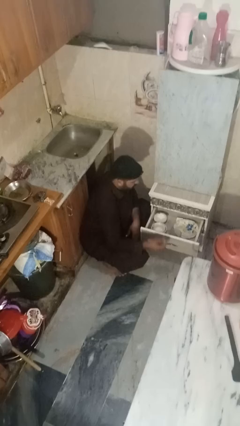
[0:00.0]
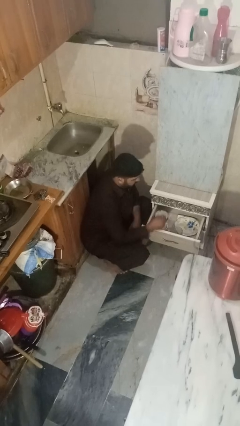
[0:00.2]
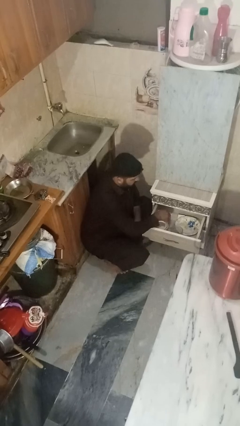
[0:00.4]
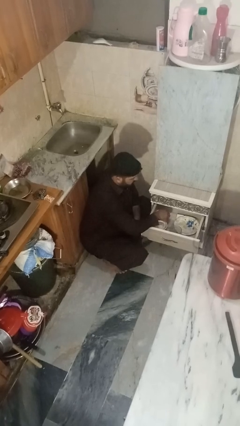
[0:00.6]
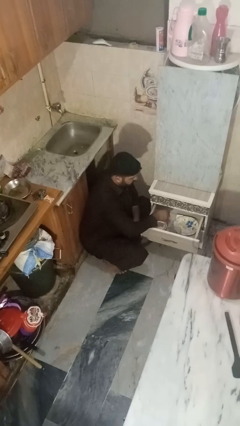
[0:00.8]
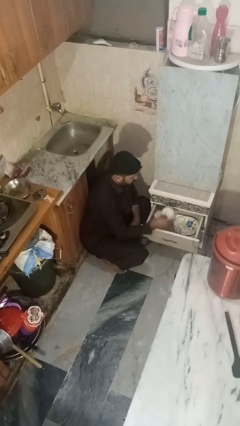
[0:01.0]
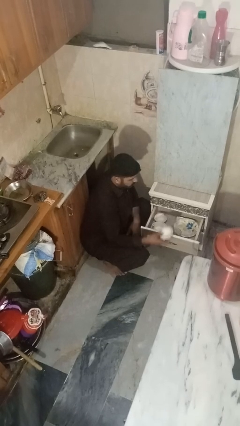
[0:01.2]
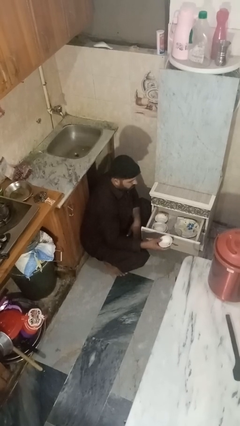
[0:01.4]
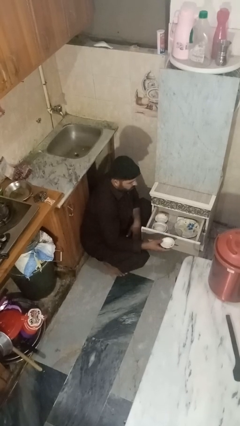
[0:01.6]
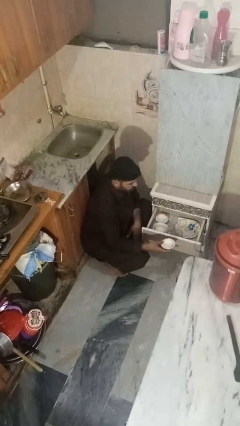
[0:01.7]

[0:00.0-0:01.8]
person takes object from kitchen drawer

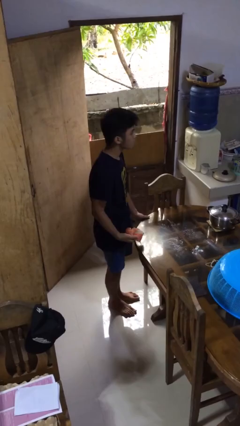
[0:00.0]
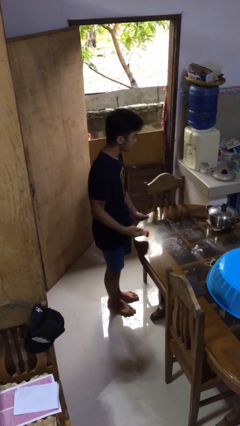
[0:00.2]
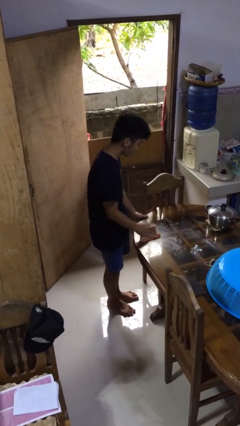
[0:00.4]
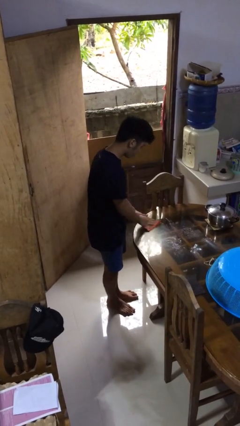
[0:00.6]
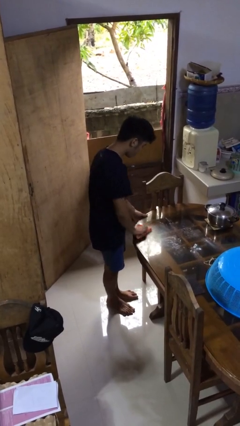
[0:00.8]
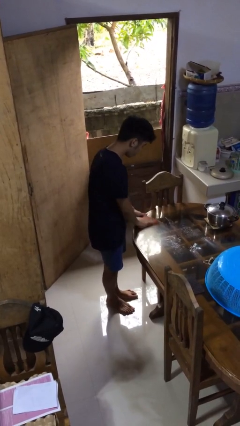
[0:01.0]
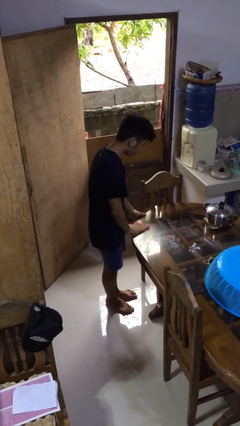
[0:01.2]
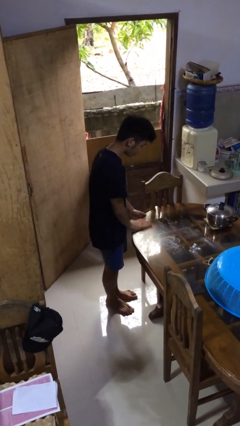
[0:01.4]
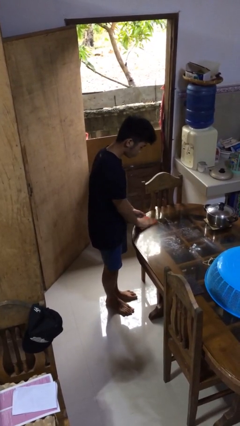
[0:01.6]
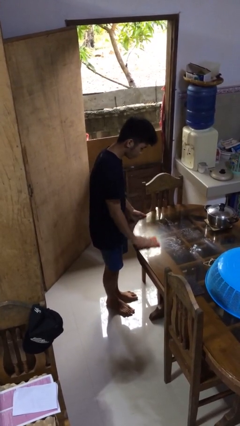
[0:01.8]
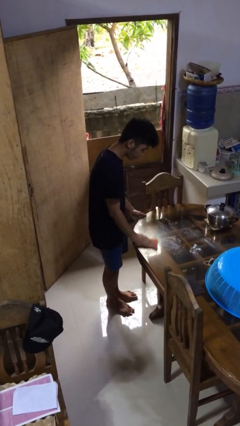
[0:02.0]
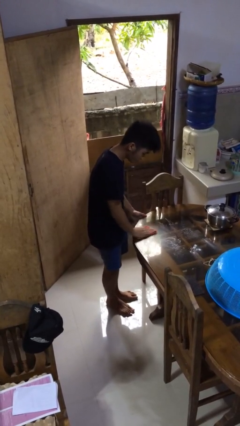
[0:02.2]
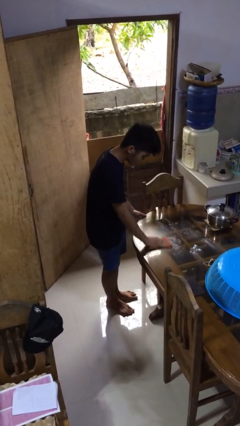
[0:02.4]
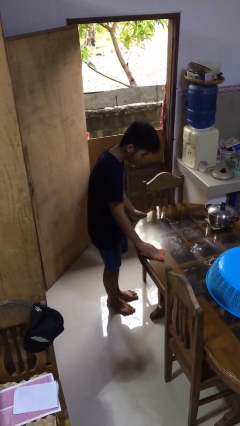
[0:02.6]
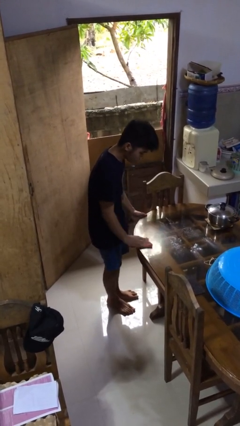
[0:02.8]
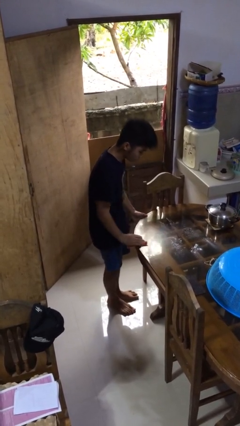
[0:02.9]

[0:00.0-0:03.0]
person cleans table with rag

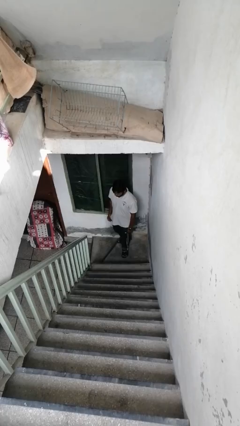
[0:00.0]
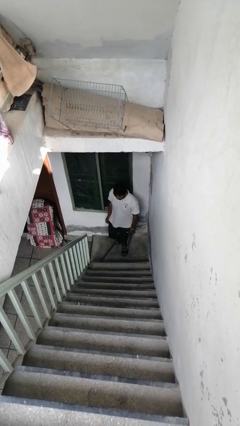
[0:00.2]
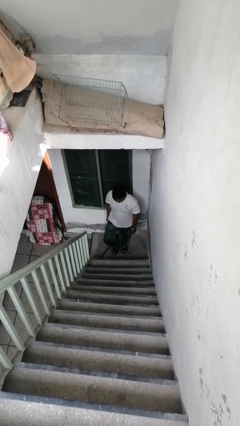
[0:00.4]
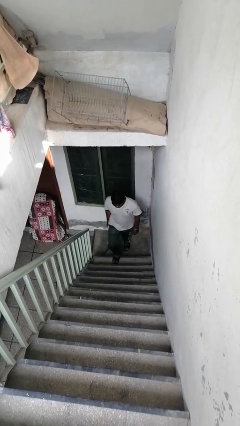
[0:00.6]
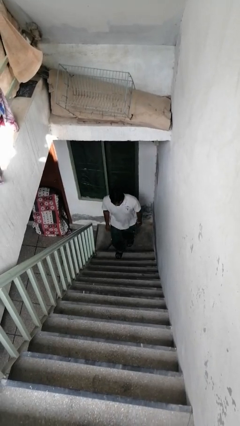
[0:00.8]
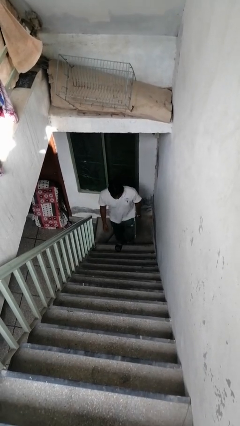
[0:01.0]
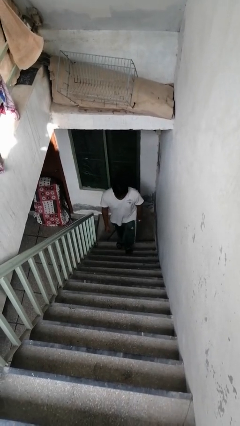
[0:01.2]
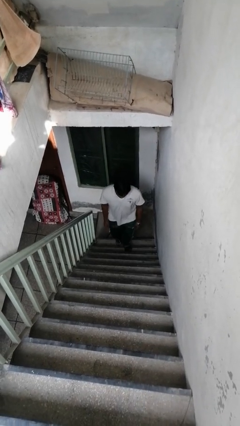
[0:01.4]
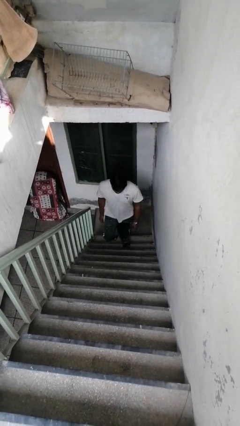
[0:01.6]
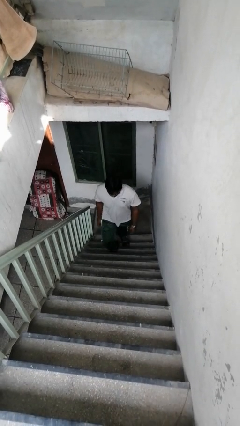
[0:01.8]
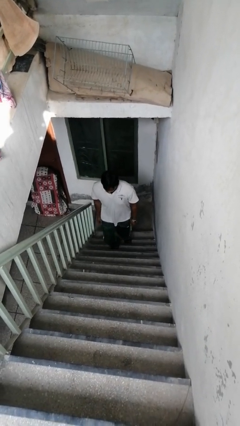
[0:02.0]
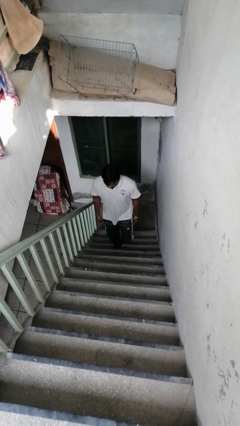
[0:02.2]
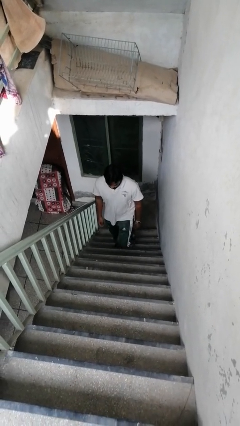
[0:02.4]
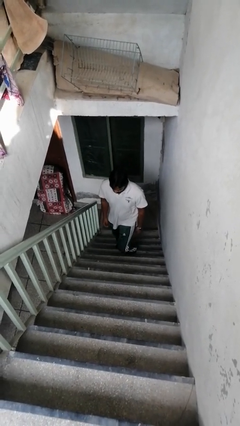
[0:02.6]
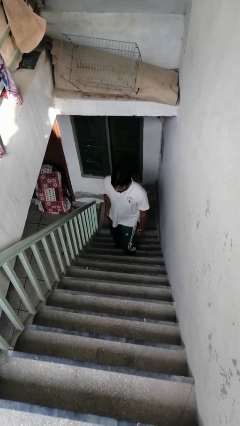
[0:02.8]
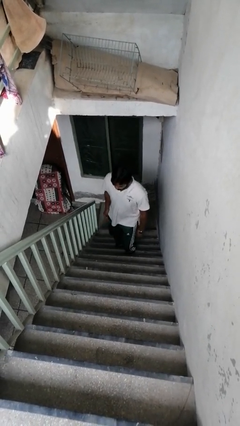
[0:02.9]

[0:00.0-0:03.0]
person climbs up stairs

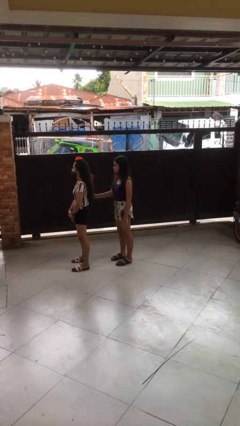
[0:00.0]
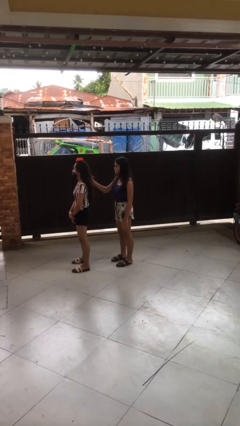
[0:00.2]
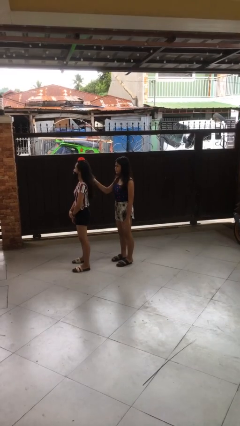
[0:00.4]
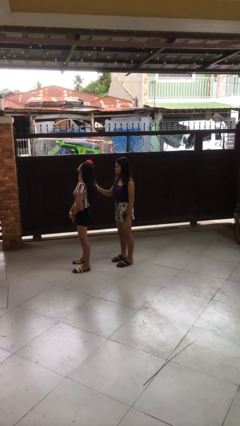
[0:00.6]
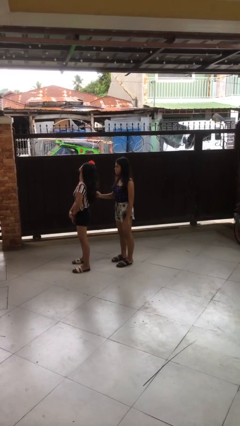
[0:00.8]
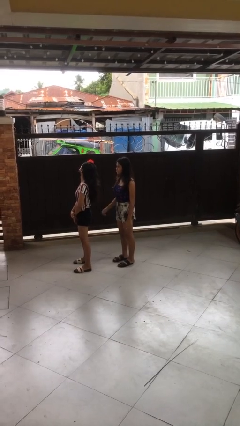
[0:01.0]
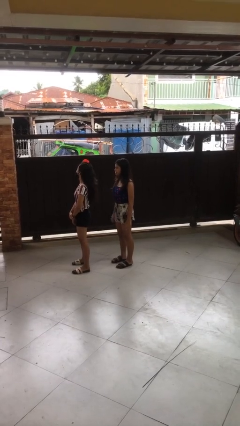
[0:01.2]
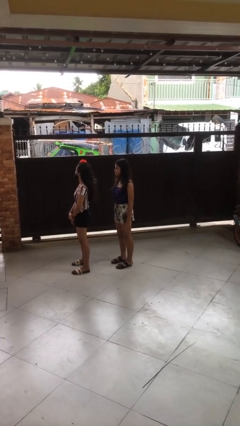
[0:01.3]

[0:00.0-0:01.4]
person grabs person by hair

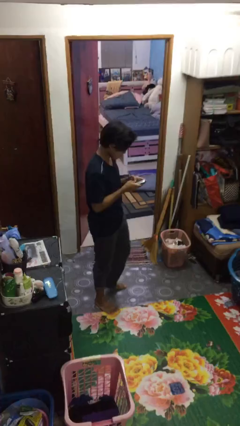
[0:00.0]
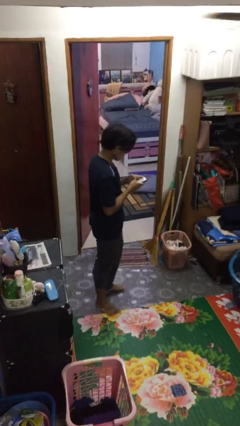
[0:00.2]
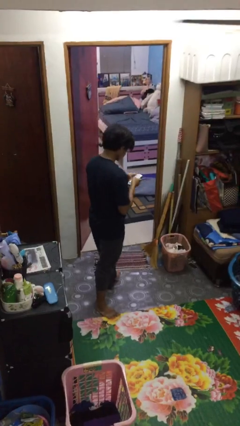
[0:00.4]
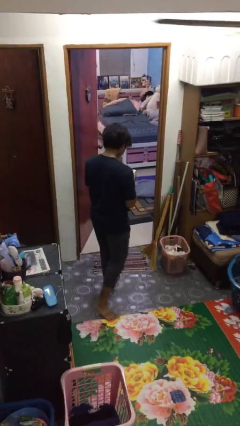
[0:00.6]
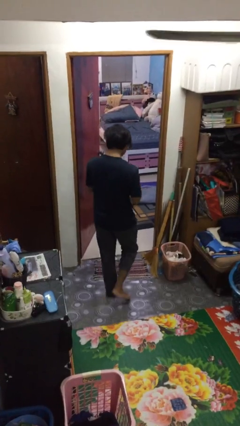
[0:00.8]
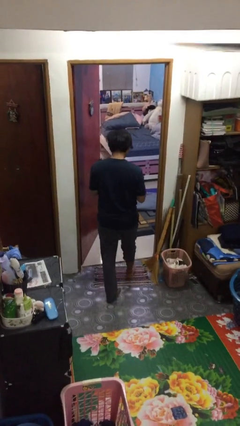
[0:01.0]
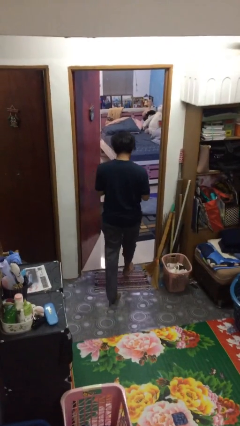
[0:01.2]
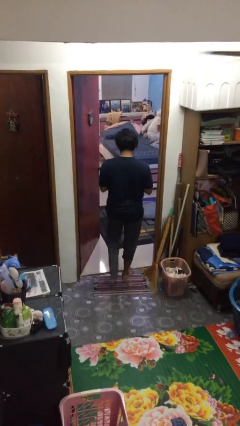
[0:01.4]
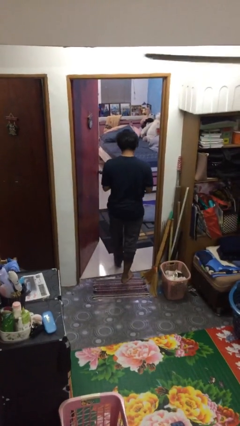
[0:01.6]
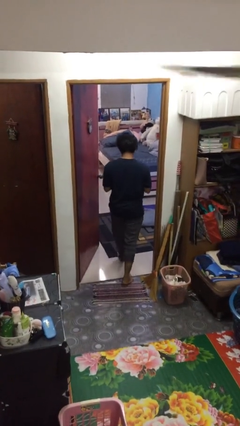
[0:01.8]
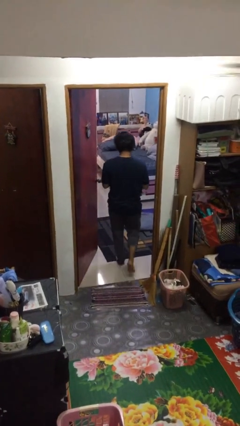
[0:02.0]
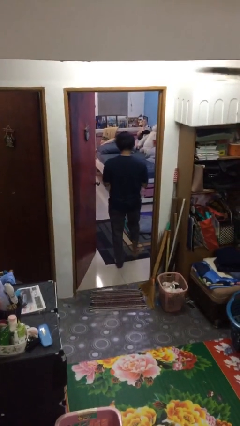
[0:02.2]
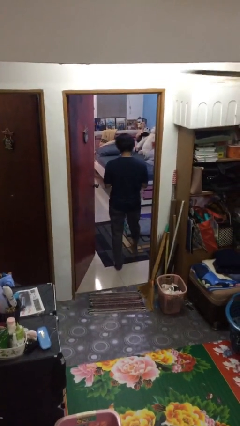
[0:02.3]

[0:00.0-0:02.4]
person exits scene through structure

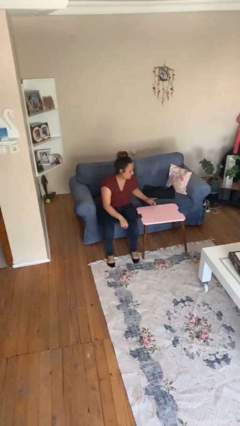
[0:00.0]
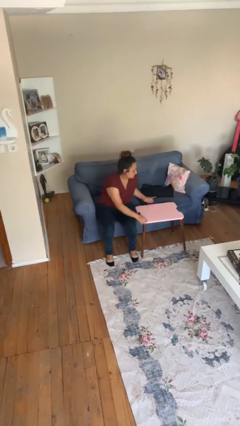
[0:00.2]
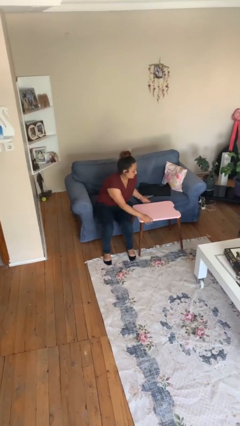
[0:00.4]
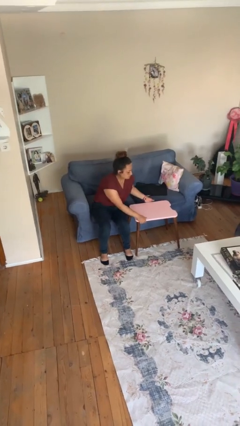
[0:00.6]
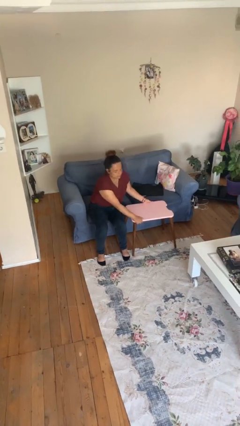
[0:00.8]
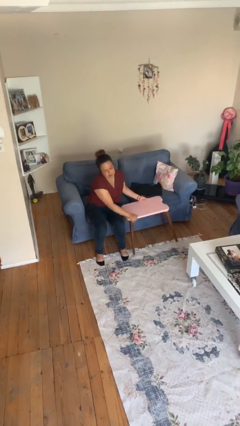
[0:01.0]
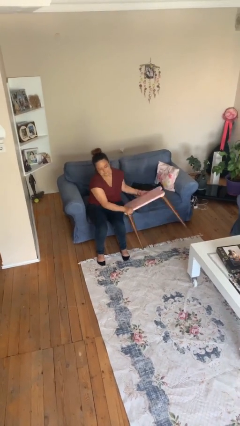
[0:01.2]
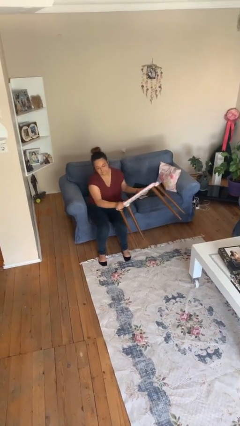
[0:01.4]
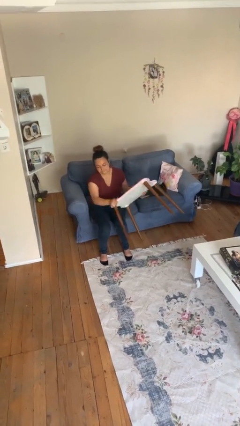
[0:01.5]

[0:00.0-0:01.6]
person picks up object from floor

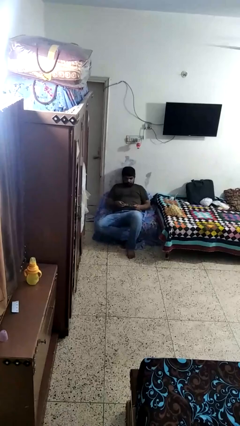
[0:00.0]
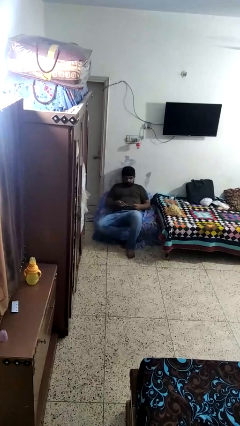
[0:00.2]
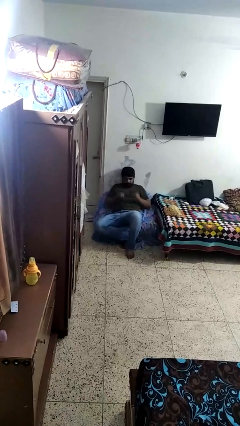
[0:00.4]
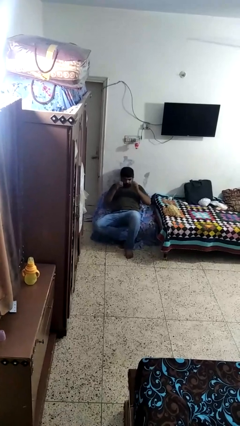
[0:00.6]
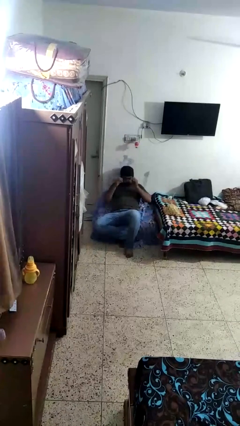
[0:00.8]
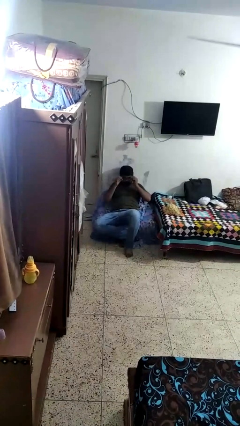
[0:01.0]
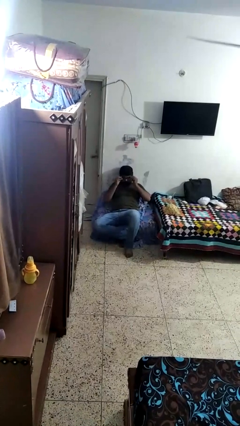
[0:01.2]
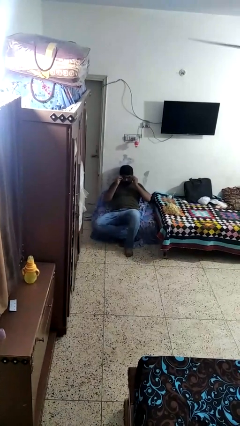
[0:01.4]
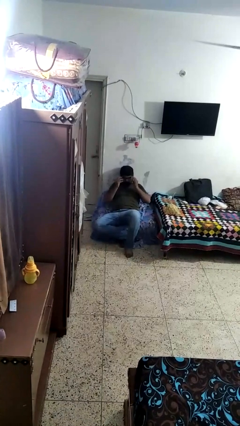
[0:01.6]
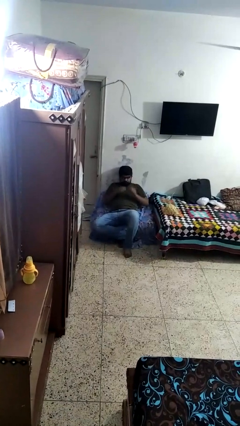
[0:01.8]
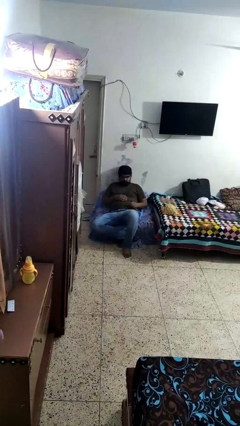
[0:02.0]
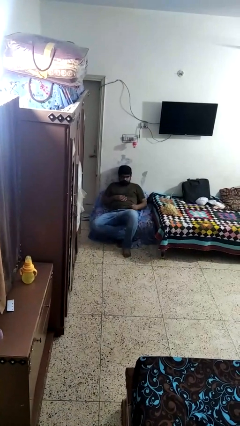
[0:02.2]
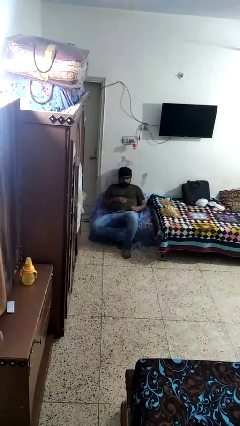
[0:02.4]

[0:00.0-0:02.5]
person puts on glasses

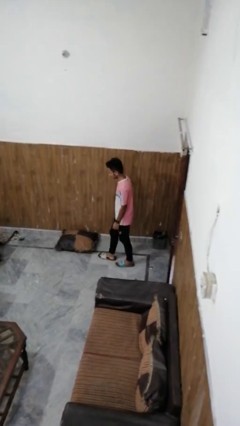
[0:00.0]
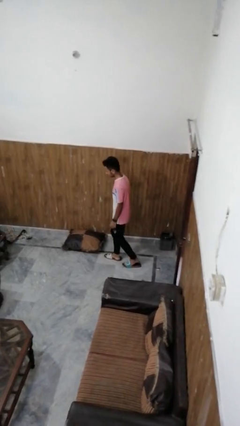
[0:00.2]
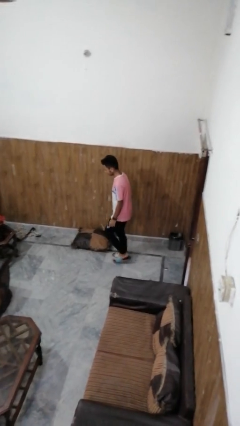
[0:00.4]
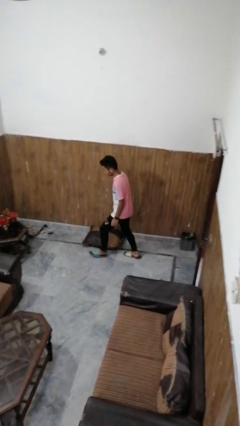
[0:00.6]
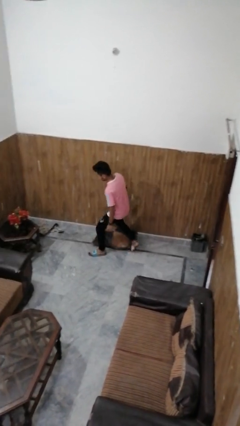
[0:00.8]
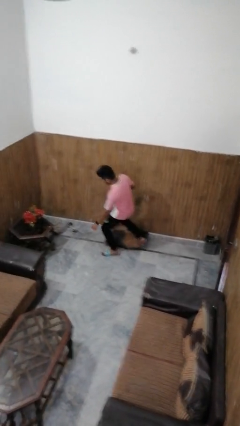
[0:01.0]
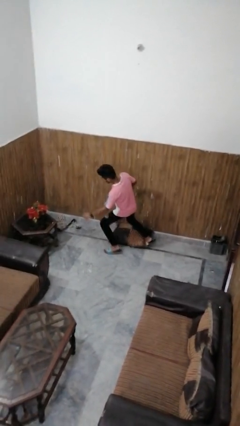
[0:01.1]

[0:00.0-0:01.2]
person trips on object on floor
